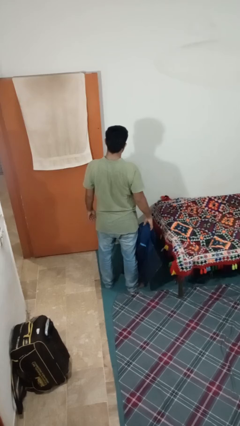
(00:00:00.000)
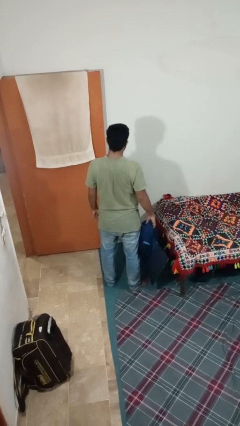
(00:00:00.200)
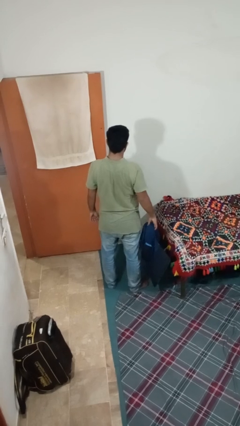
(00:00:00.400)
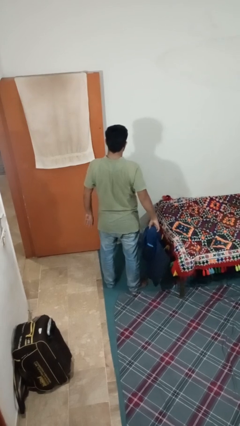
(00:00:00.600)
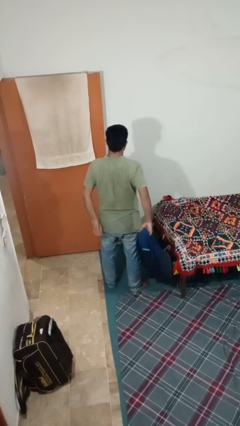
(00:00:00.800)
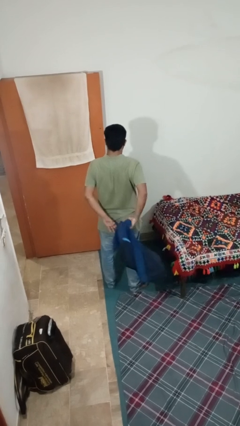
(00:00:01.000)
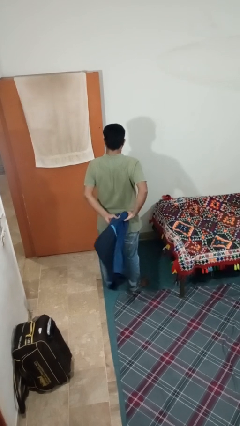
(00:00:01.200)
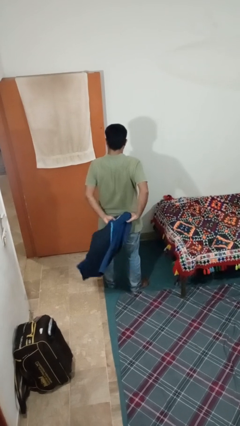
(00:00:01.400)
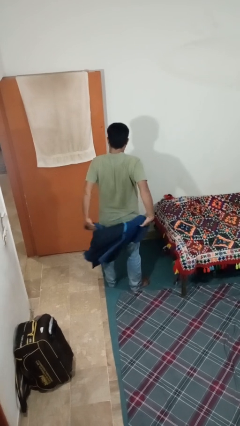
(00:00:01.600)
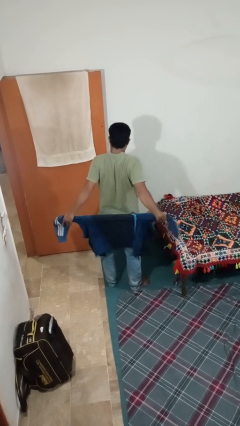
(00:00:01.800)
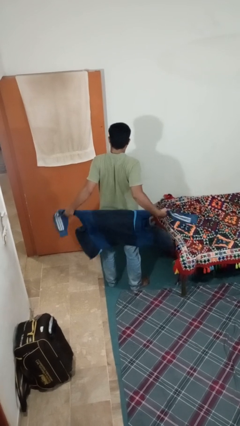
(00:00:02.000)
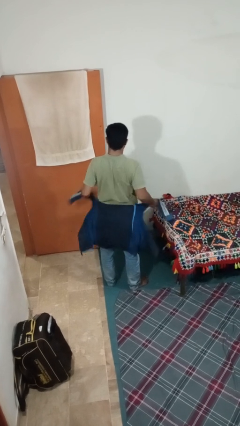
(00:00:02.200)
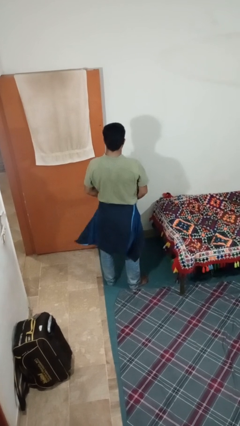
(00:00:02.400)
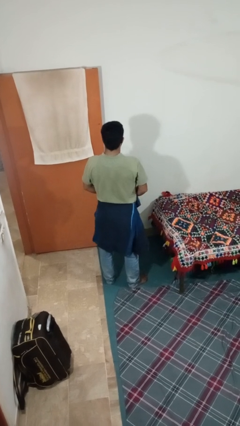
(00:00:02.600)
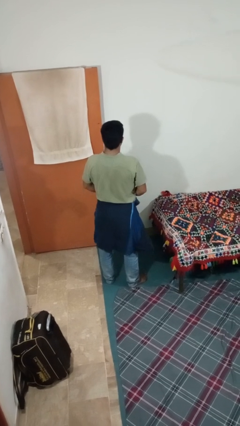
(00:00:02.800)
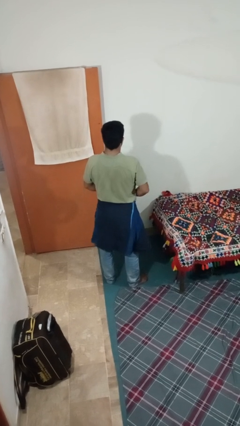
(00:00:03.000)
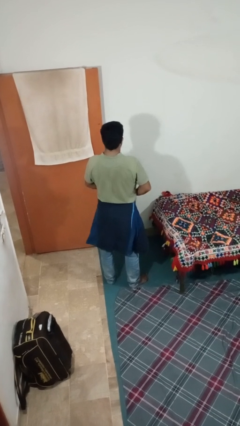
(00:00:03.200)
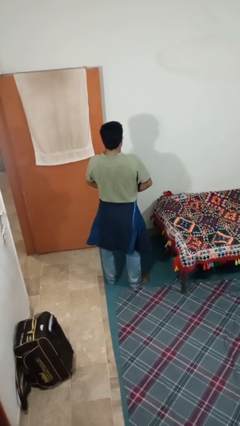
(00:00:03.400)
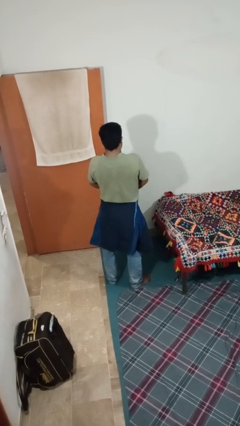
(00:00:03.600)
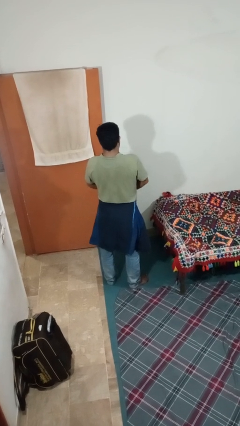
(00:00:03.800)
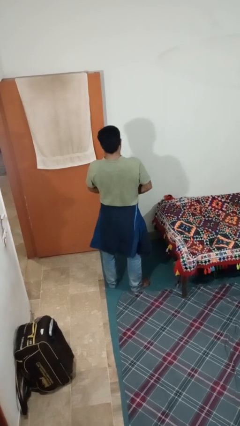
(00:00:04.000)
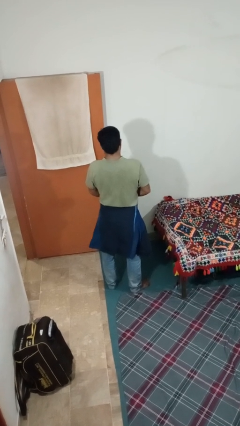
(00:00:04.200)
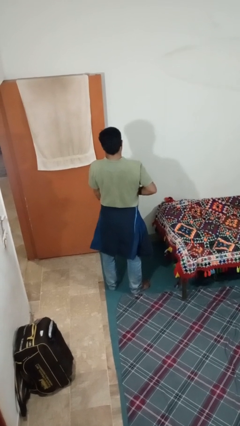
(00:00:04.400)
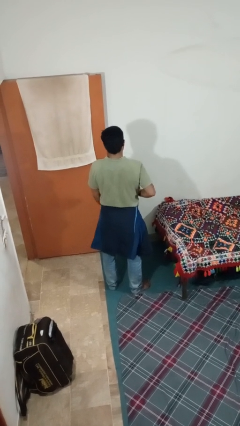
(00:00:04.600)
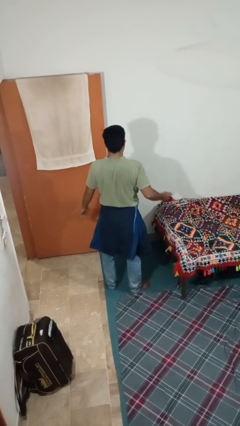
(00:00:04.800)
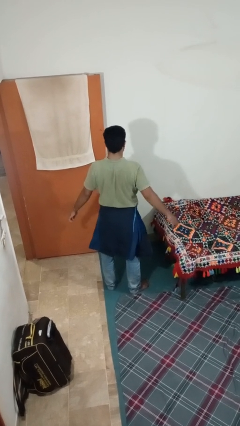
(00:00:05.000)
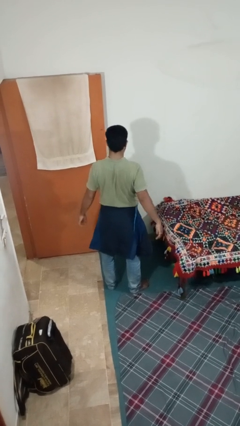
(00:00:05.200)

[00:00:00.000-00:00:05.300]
person ties jacket around waist

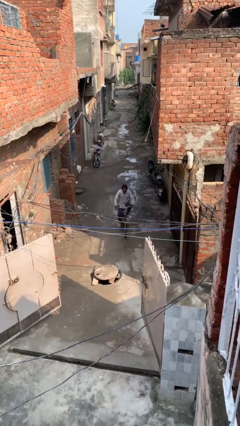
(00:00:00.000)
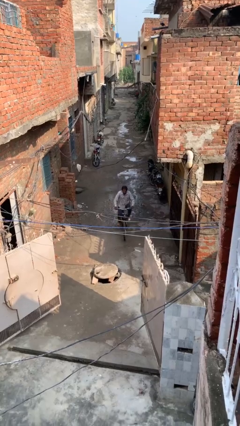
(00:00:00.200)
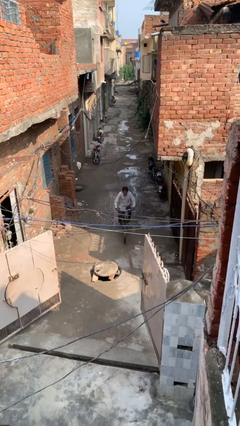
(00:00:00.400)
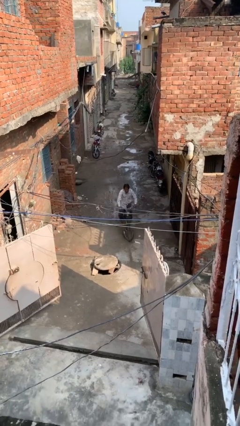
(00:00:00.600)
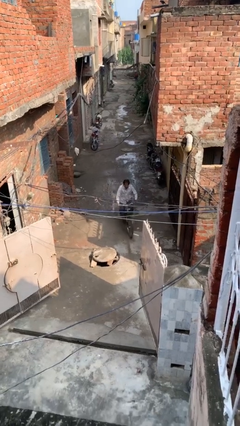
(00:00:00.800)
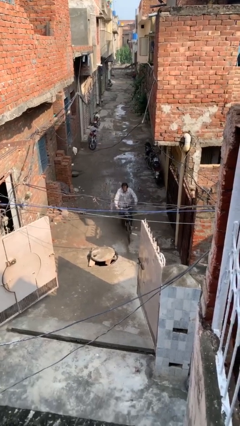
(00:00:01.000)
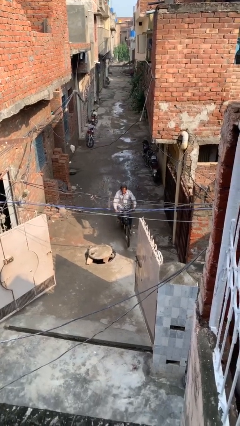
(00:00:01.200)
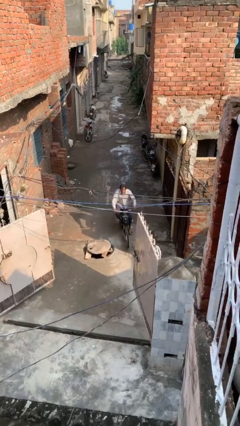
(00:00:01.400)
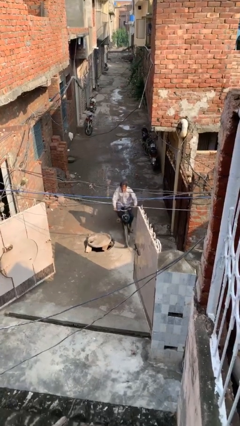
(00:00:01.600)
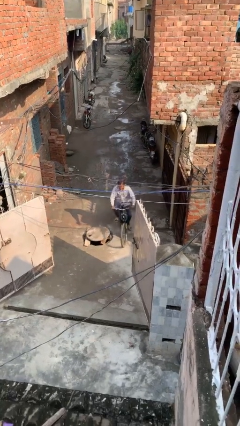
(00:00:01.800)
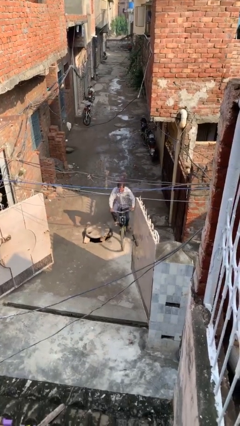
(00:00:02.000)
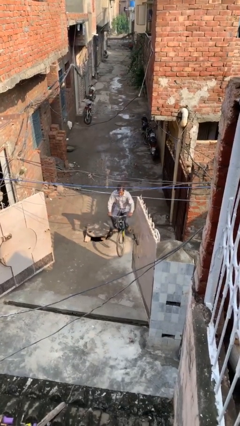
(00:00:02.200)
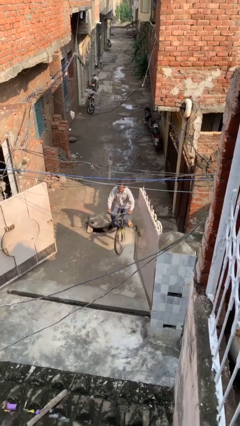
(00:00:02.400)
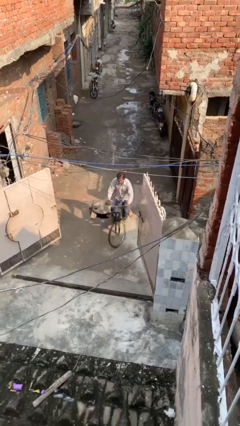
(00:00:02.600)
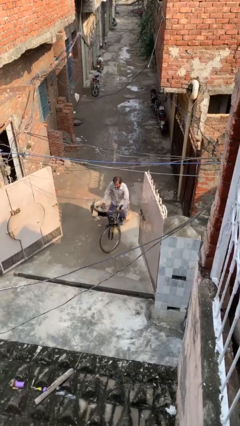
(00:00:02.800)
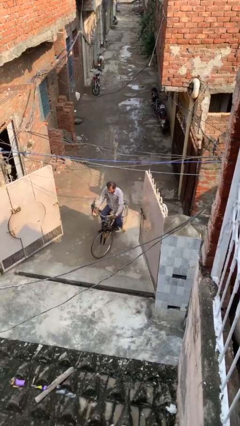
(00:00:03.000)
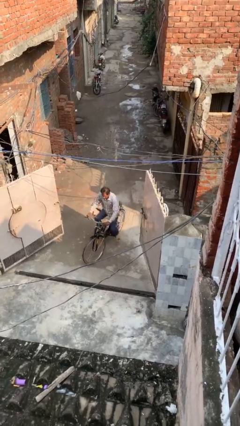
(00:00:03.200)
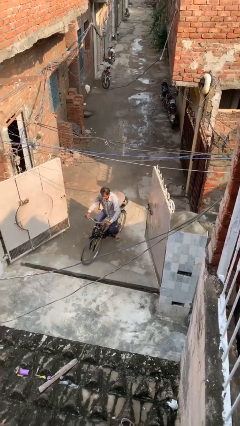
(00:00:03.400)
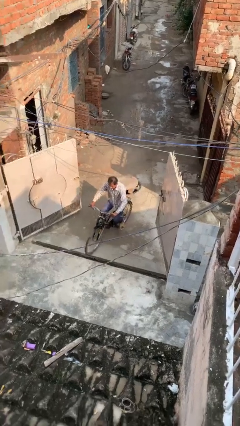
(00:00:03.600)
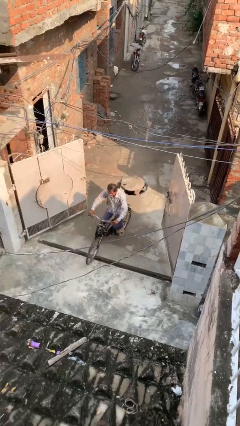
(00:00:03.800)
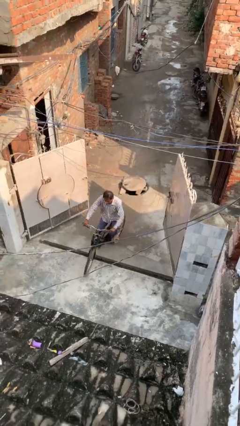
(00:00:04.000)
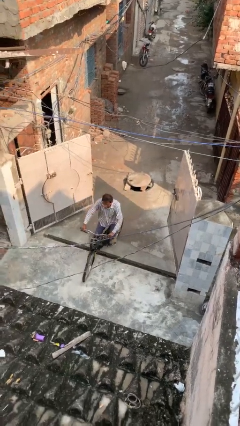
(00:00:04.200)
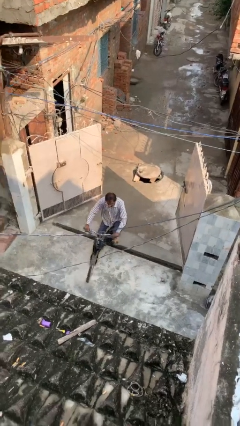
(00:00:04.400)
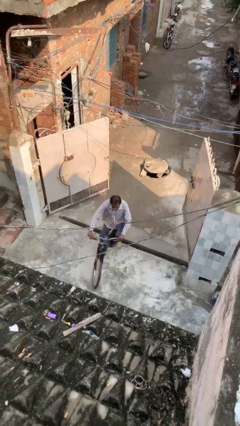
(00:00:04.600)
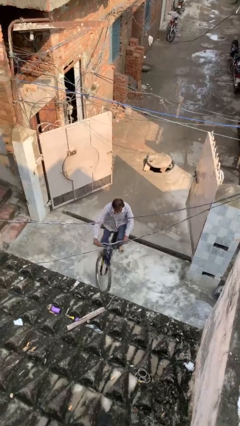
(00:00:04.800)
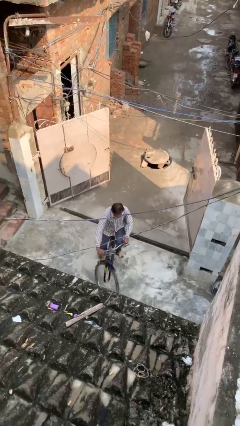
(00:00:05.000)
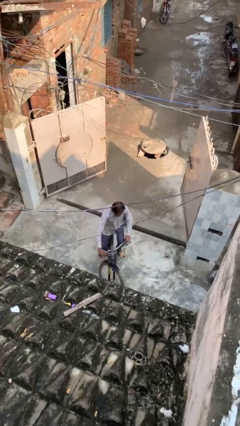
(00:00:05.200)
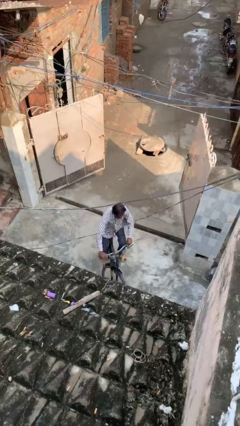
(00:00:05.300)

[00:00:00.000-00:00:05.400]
person rides bicycle

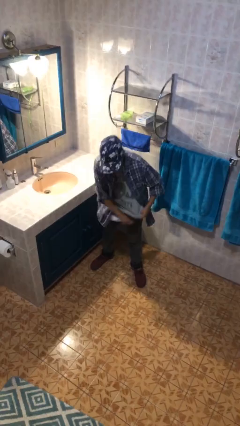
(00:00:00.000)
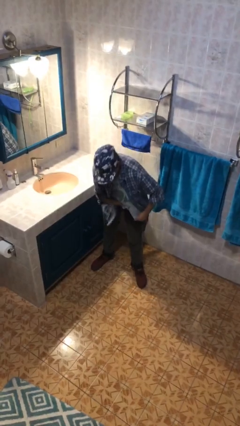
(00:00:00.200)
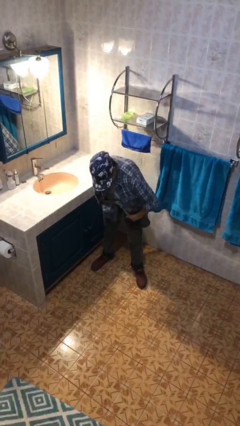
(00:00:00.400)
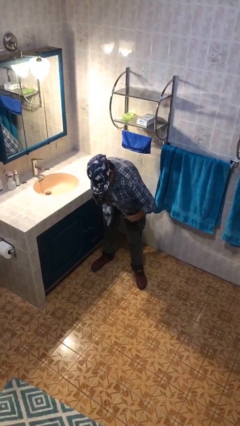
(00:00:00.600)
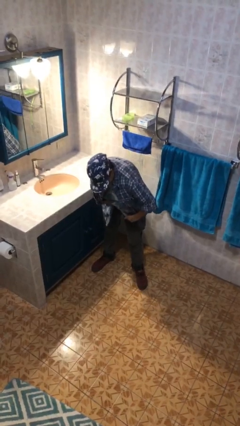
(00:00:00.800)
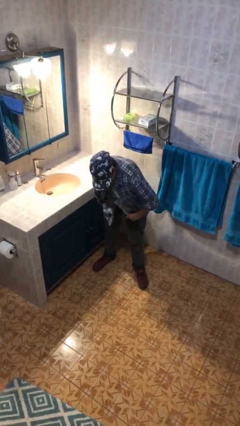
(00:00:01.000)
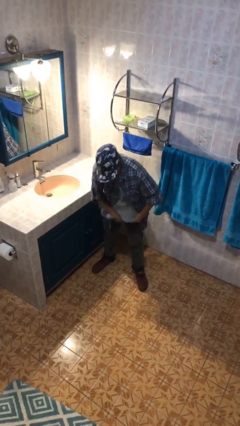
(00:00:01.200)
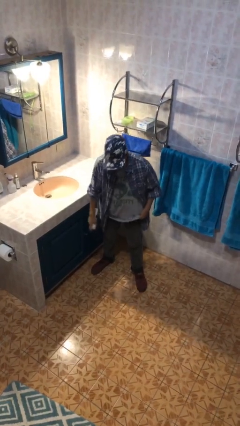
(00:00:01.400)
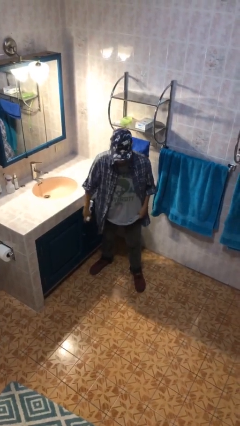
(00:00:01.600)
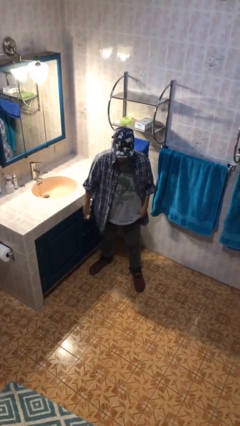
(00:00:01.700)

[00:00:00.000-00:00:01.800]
person applies deodorant

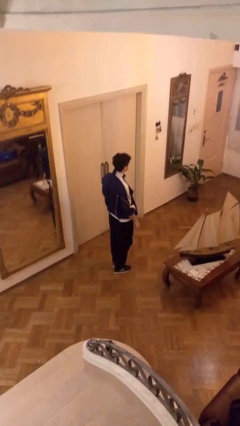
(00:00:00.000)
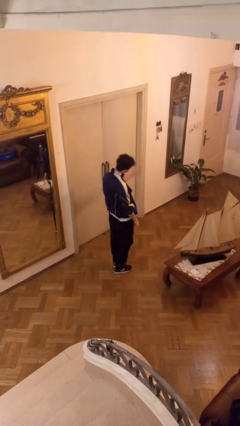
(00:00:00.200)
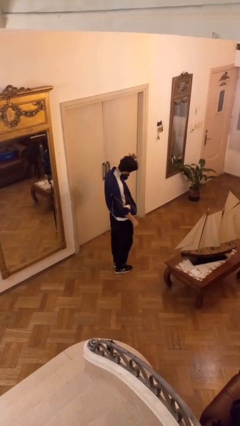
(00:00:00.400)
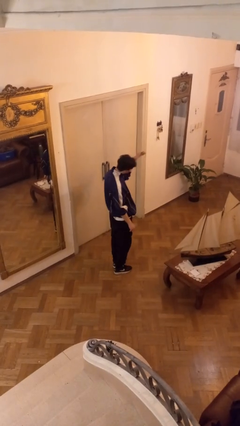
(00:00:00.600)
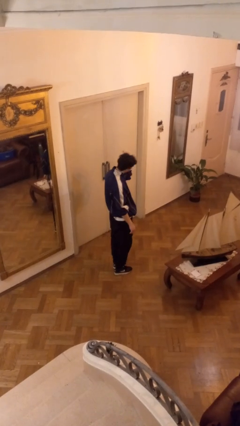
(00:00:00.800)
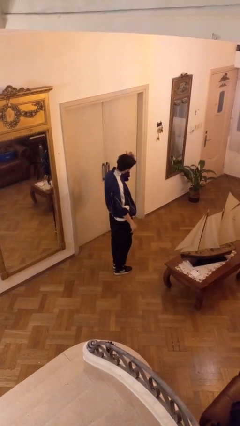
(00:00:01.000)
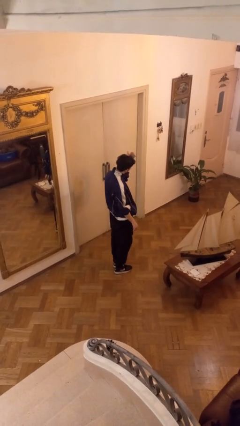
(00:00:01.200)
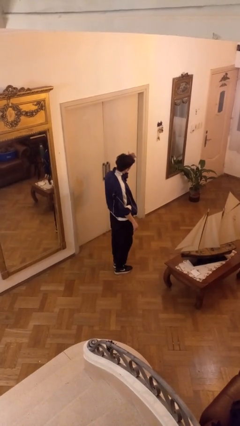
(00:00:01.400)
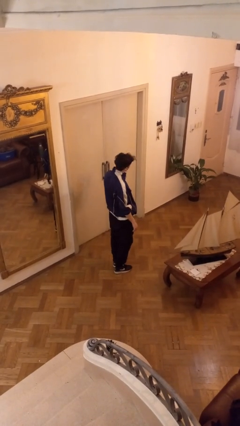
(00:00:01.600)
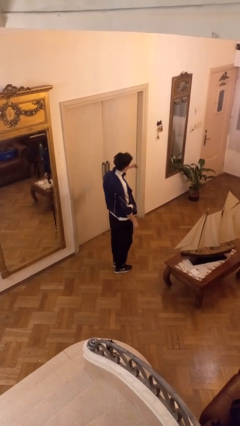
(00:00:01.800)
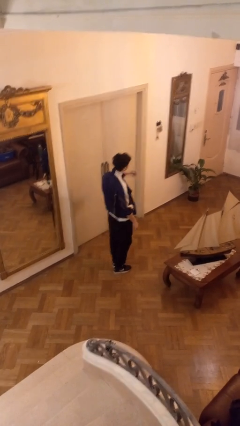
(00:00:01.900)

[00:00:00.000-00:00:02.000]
person gestures come here

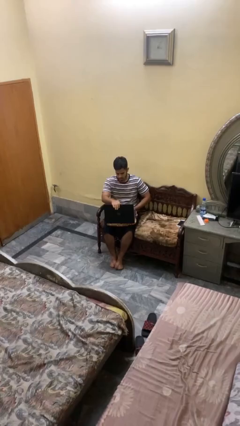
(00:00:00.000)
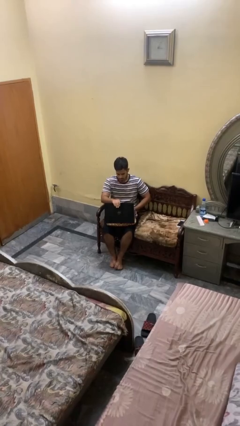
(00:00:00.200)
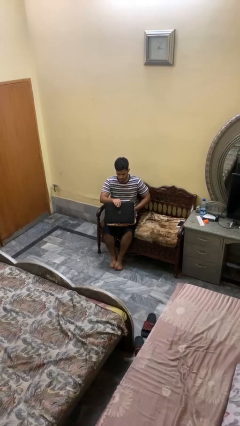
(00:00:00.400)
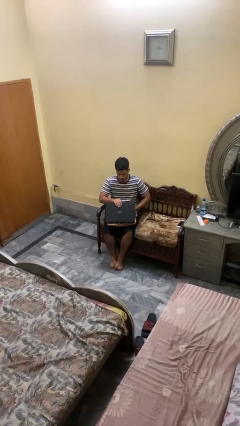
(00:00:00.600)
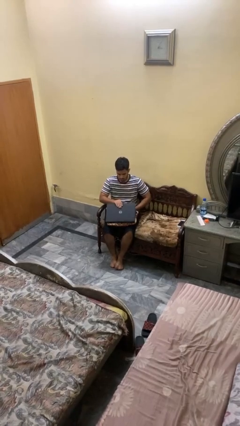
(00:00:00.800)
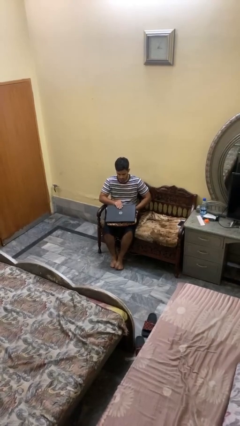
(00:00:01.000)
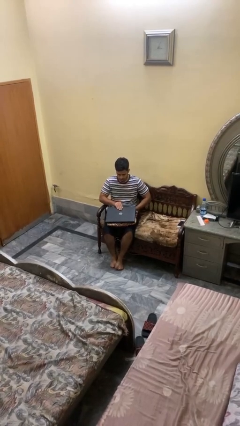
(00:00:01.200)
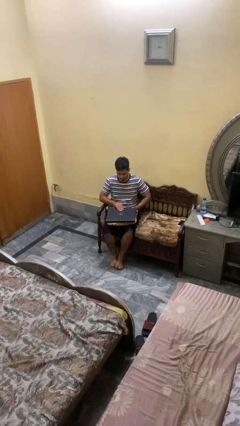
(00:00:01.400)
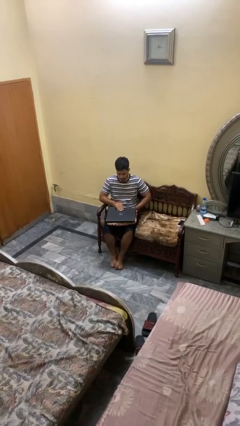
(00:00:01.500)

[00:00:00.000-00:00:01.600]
person closes laptop

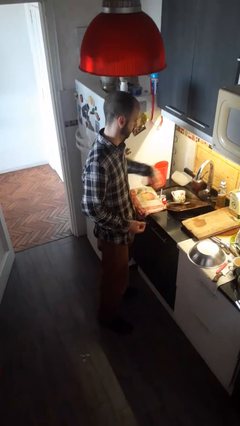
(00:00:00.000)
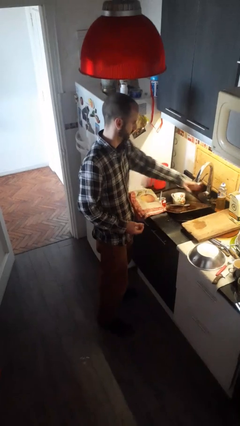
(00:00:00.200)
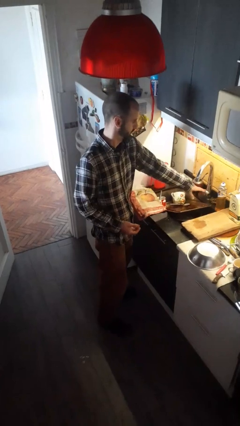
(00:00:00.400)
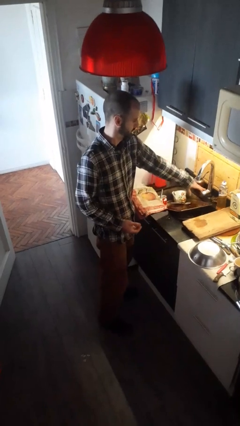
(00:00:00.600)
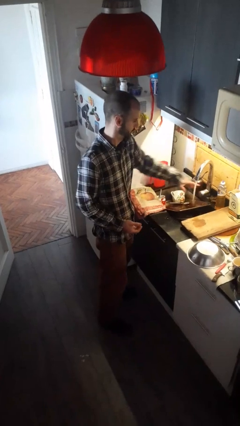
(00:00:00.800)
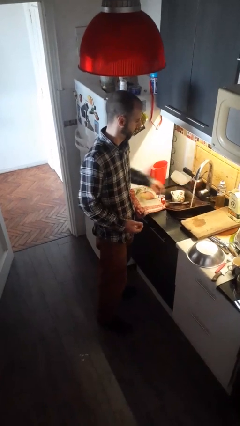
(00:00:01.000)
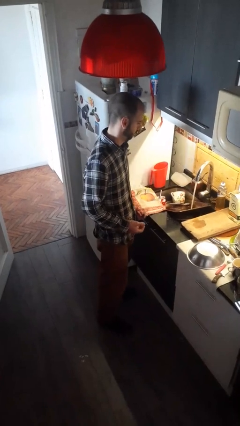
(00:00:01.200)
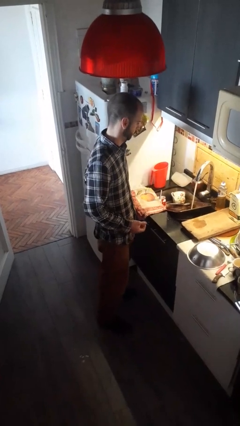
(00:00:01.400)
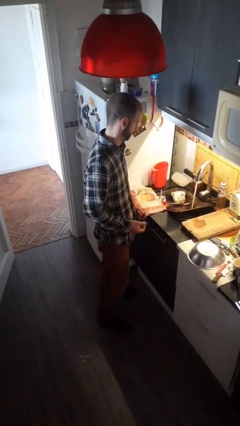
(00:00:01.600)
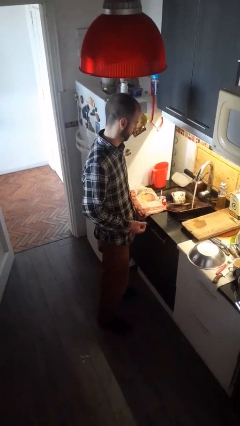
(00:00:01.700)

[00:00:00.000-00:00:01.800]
person turns on faucet
